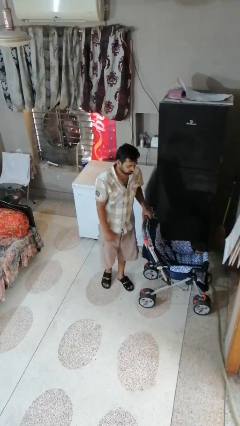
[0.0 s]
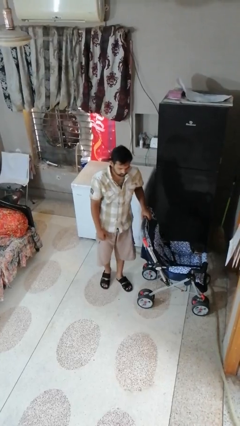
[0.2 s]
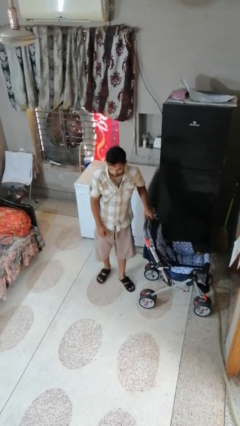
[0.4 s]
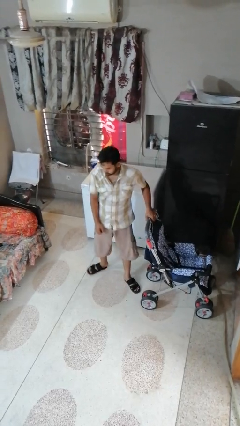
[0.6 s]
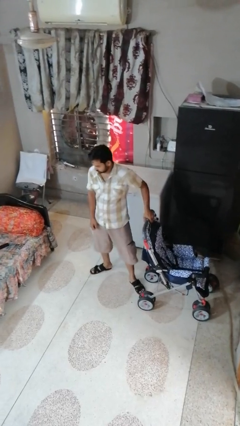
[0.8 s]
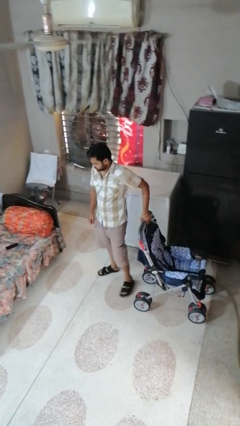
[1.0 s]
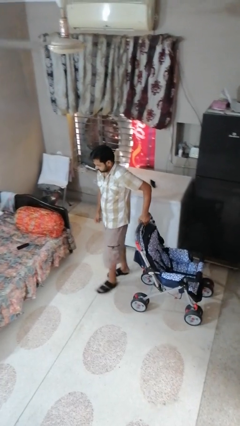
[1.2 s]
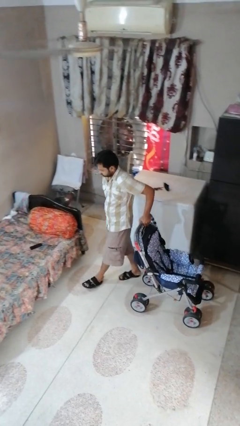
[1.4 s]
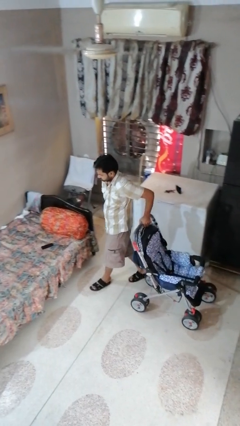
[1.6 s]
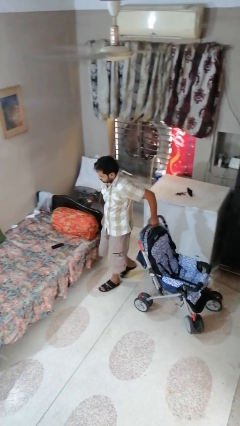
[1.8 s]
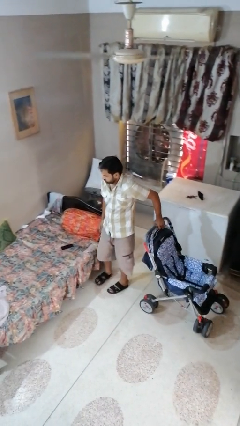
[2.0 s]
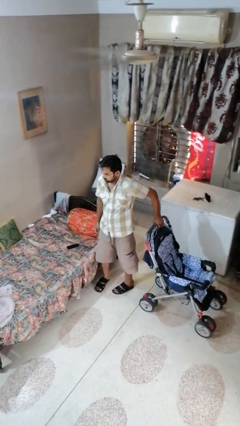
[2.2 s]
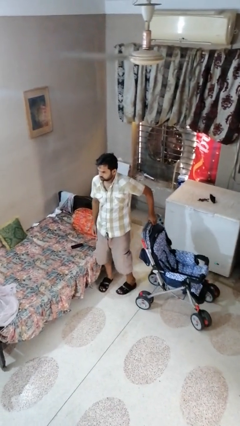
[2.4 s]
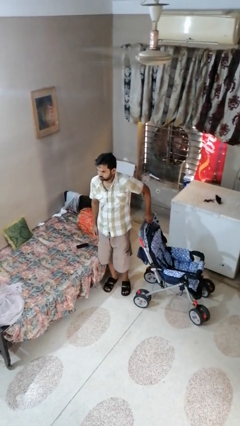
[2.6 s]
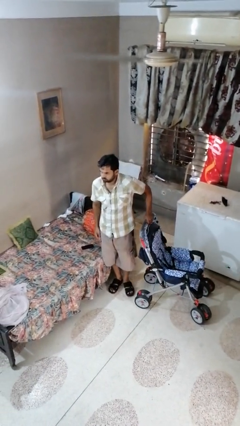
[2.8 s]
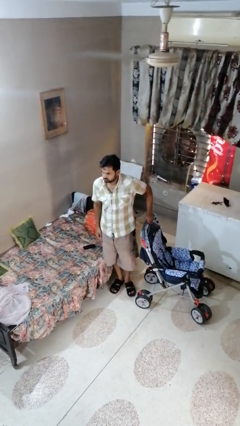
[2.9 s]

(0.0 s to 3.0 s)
person pulls wheeled cart

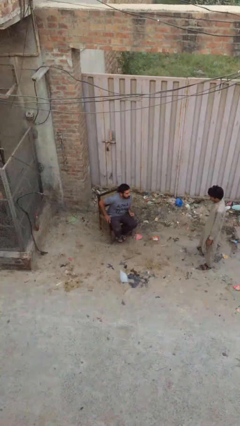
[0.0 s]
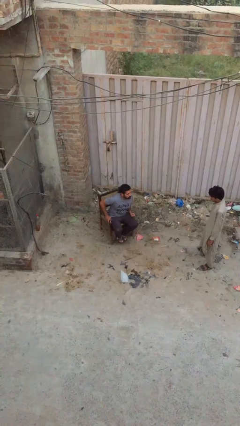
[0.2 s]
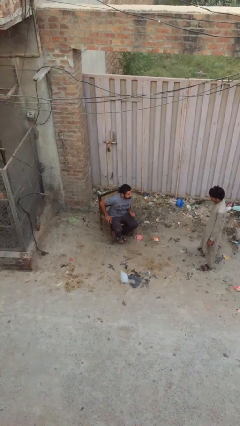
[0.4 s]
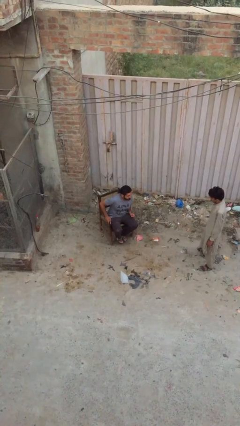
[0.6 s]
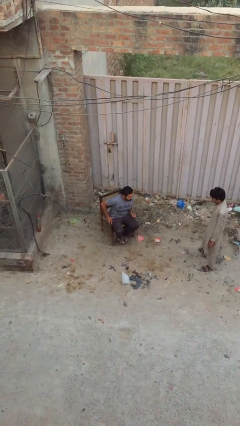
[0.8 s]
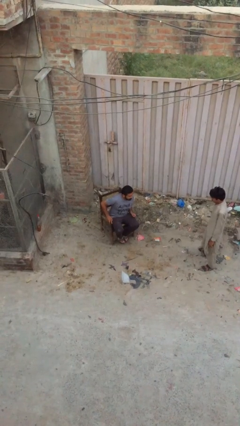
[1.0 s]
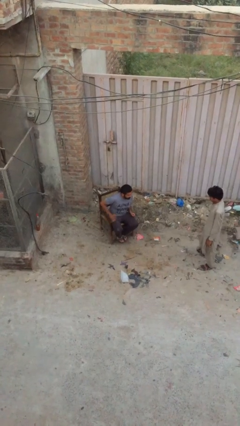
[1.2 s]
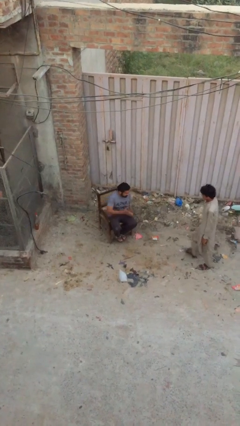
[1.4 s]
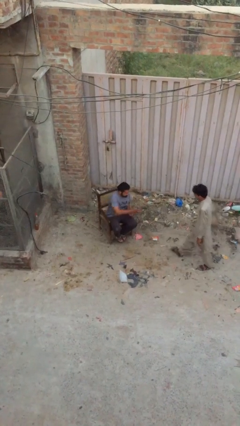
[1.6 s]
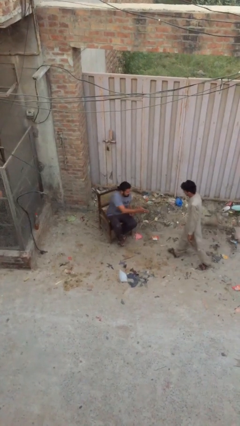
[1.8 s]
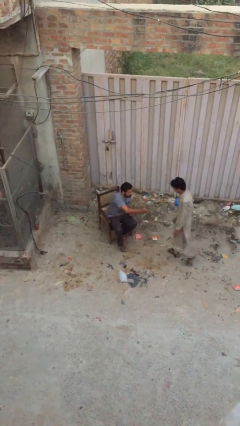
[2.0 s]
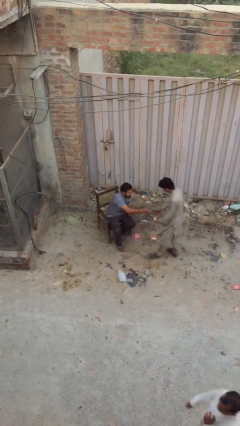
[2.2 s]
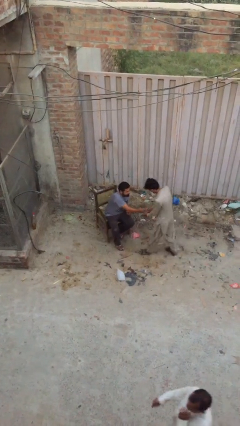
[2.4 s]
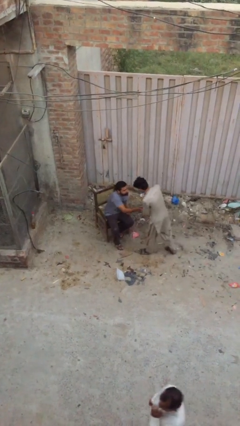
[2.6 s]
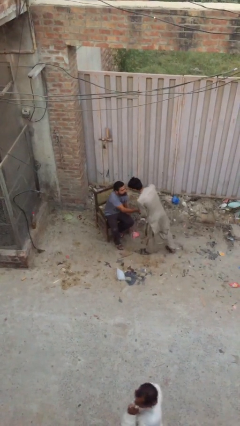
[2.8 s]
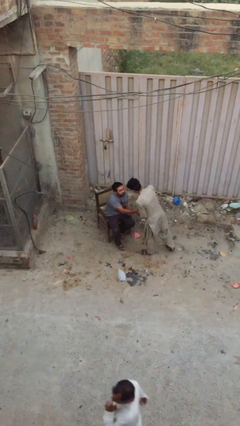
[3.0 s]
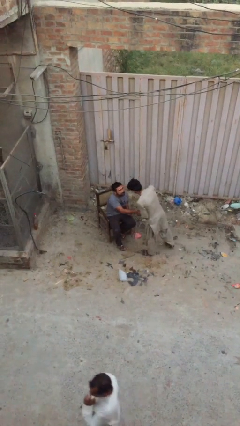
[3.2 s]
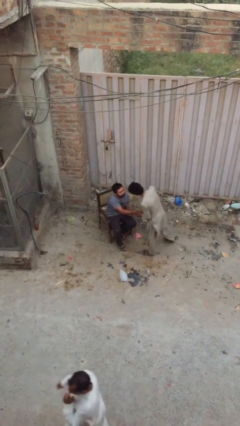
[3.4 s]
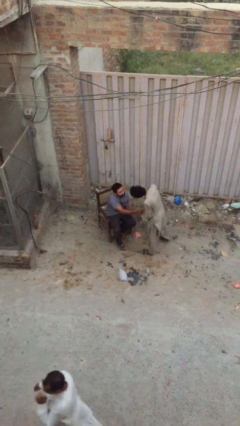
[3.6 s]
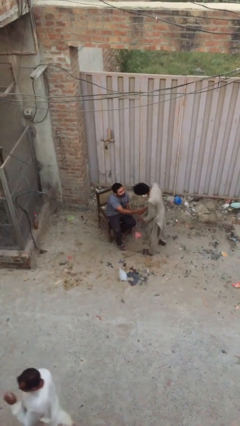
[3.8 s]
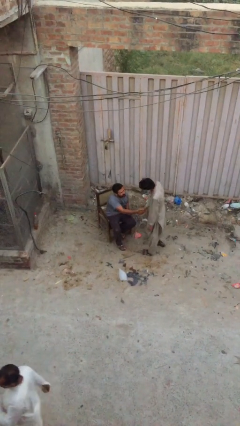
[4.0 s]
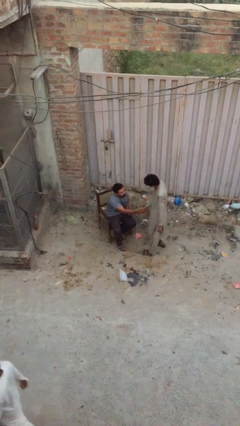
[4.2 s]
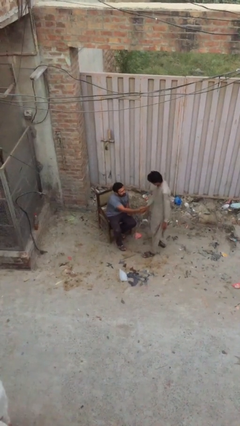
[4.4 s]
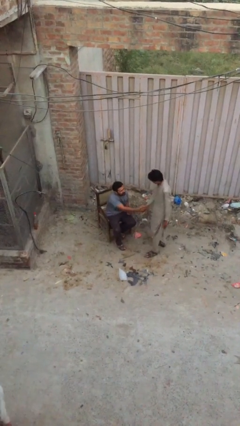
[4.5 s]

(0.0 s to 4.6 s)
person shakes hand

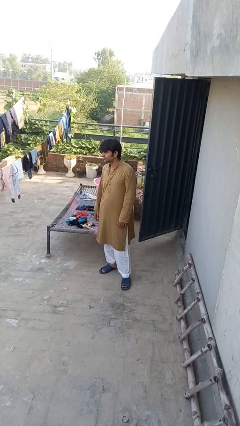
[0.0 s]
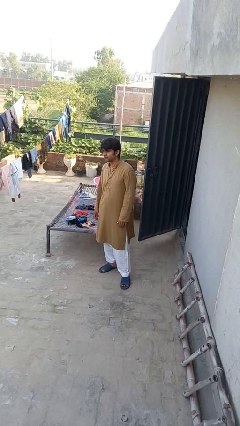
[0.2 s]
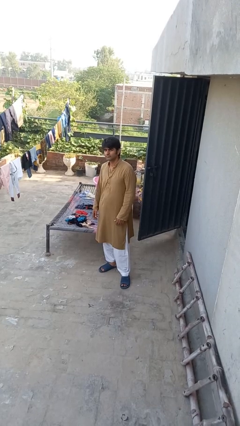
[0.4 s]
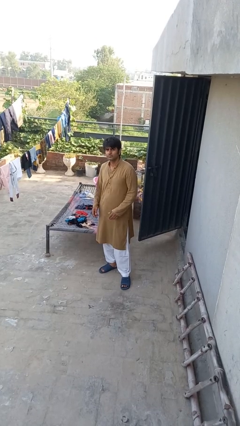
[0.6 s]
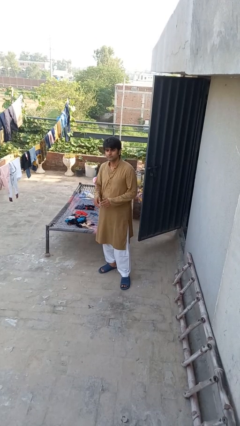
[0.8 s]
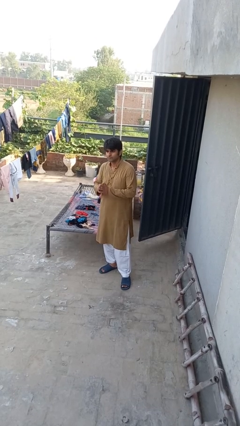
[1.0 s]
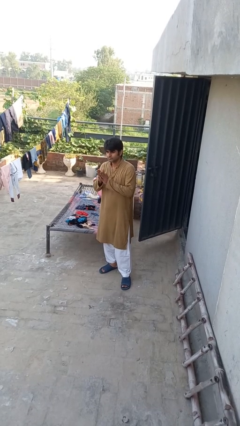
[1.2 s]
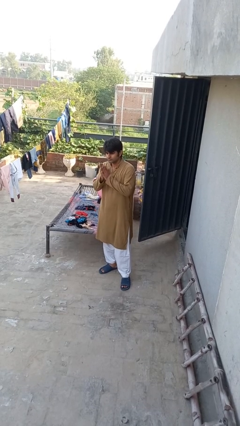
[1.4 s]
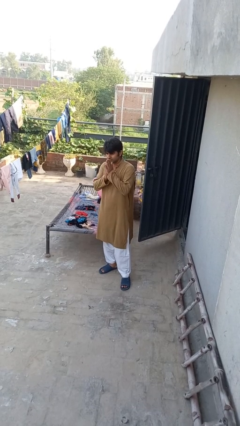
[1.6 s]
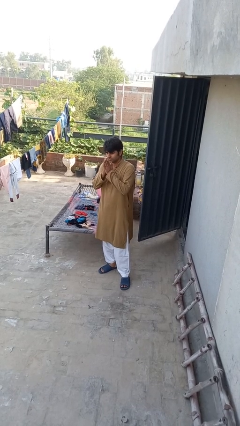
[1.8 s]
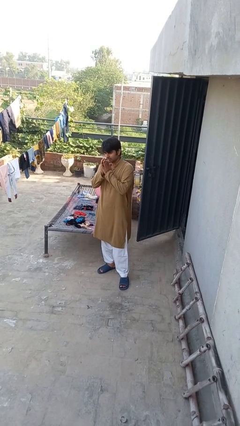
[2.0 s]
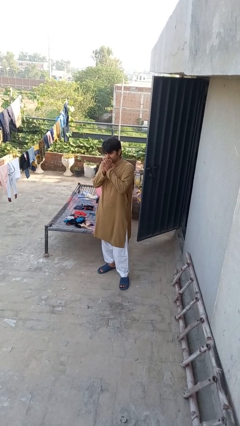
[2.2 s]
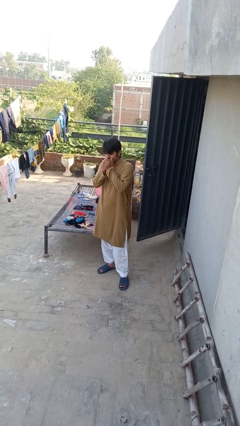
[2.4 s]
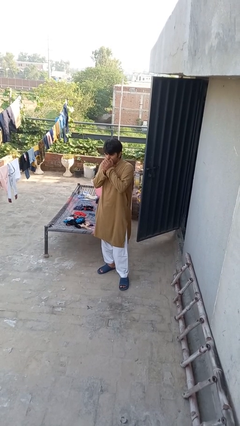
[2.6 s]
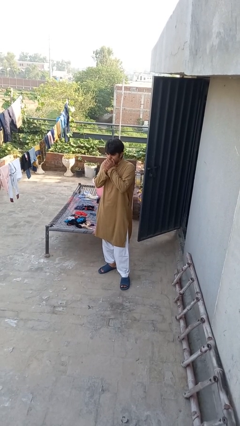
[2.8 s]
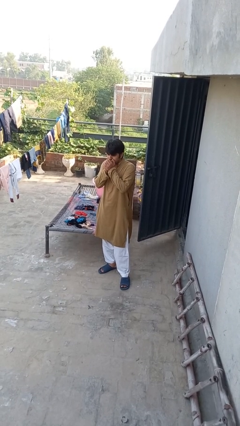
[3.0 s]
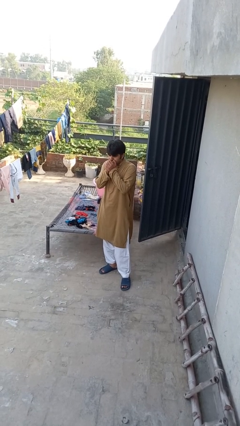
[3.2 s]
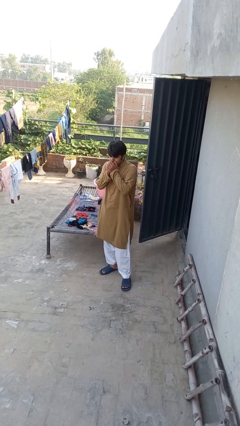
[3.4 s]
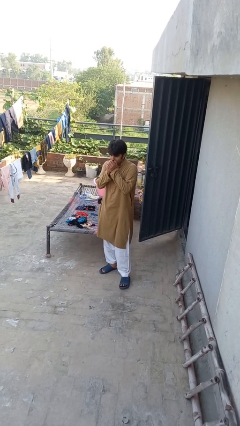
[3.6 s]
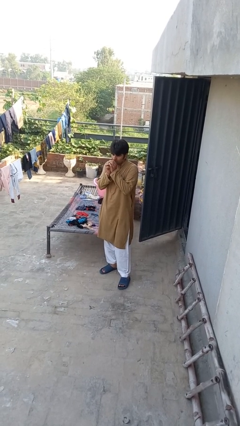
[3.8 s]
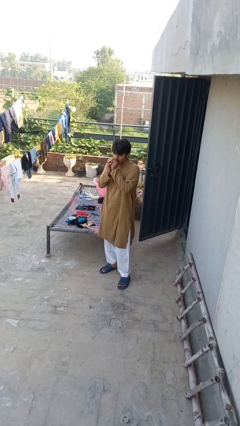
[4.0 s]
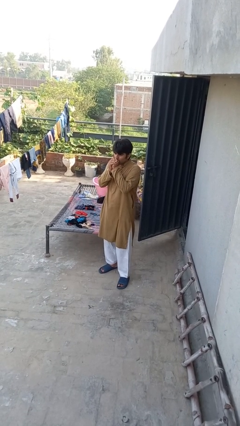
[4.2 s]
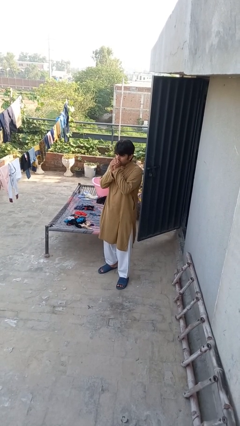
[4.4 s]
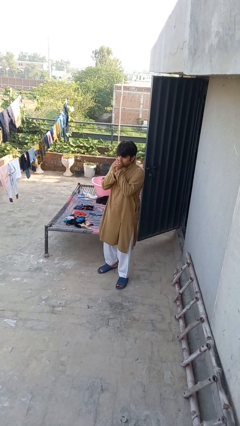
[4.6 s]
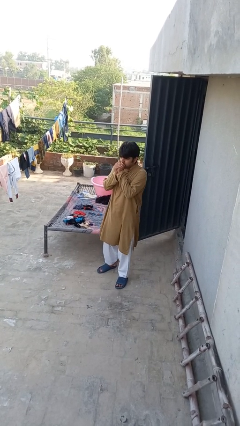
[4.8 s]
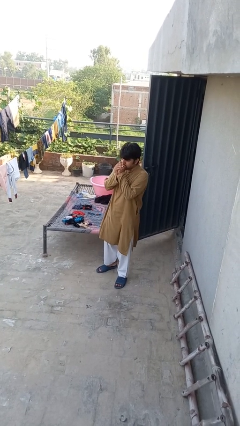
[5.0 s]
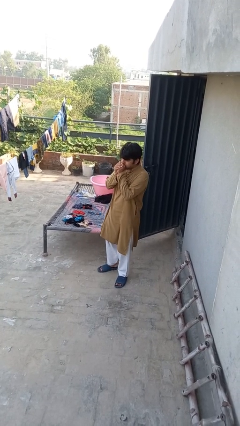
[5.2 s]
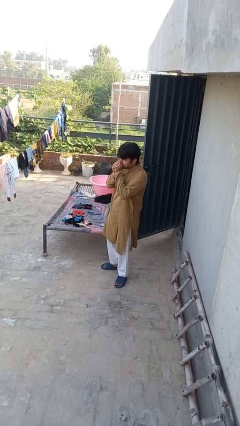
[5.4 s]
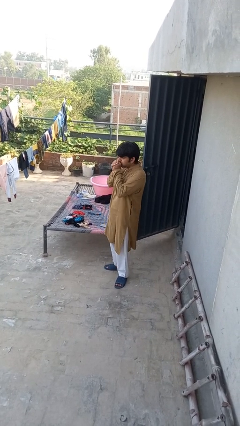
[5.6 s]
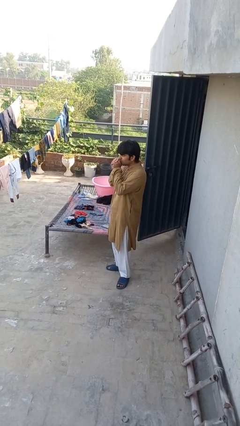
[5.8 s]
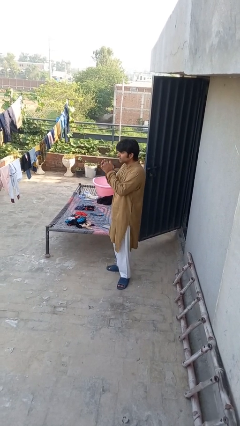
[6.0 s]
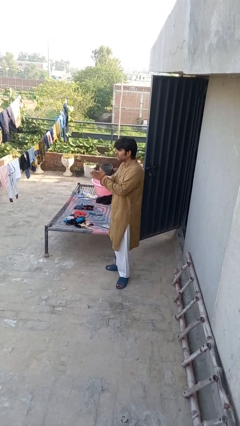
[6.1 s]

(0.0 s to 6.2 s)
person blows into hands

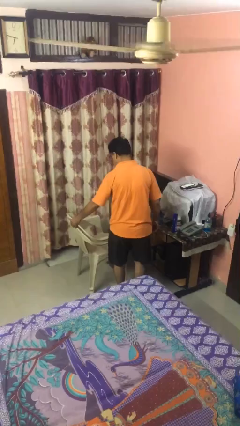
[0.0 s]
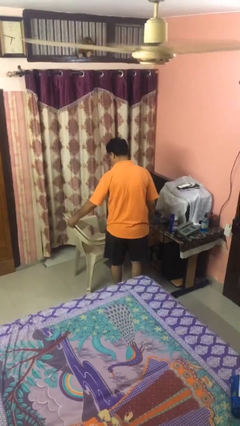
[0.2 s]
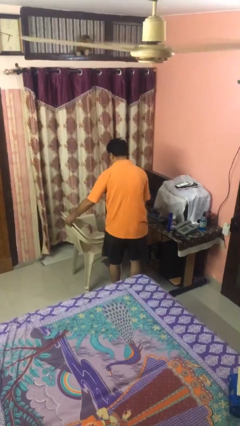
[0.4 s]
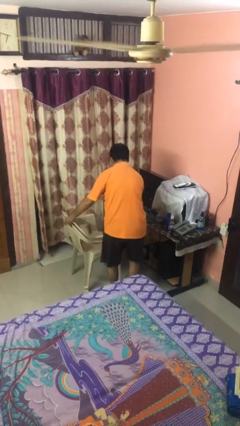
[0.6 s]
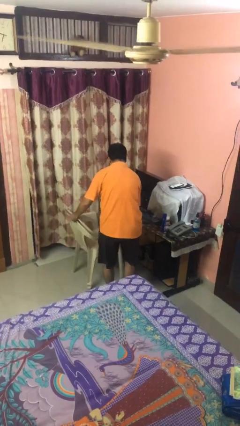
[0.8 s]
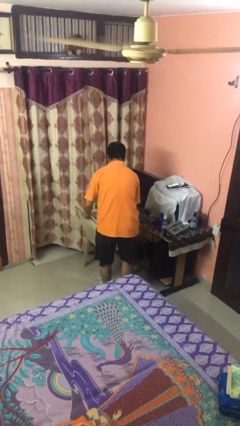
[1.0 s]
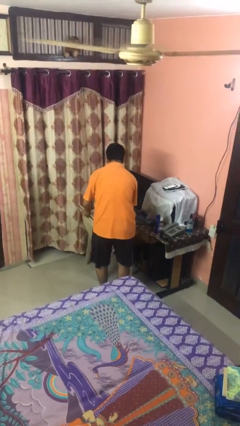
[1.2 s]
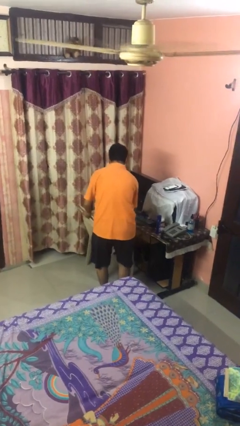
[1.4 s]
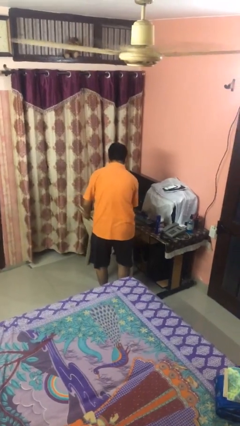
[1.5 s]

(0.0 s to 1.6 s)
person pushes in chair

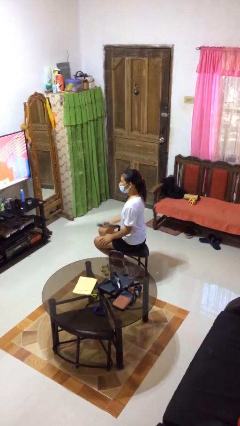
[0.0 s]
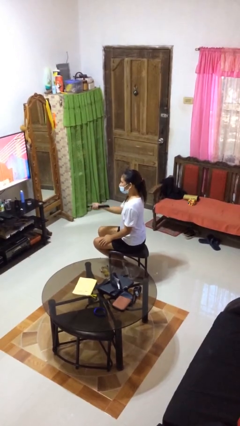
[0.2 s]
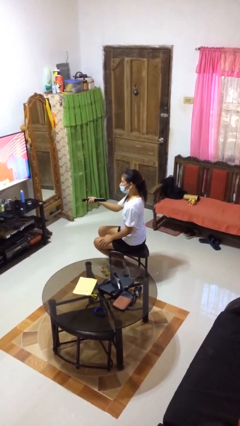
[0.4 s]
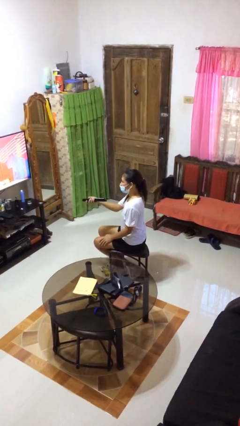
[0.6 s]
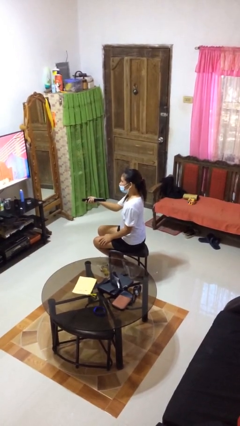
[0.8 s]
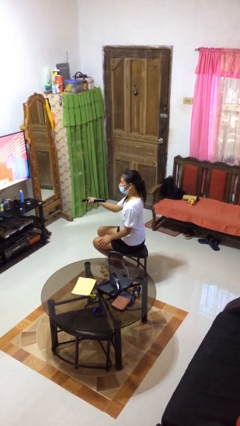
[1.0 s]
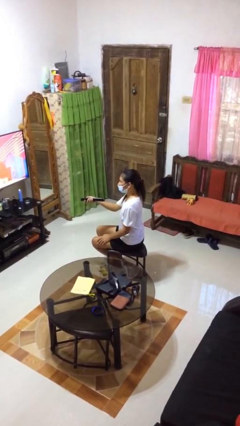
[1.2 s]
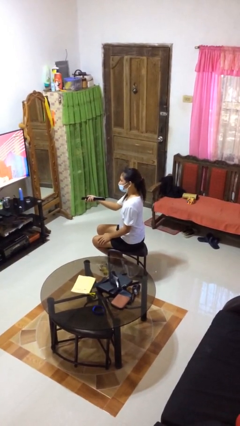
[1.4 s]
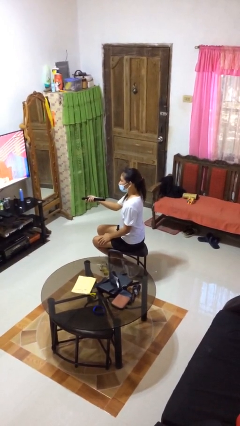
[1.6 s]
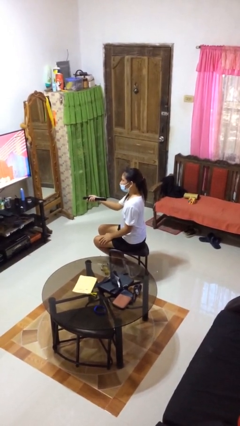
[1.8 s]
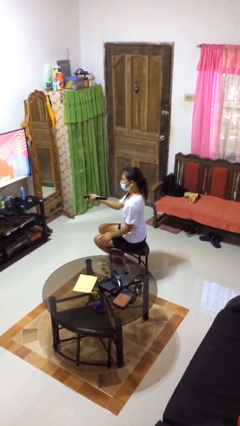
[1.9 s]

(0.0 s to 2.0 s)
person uses television remote
